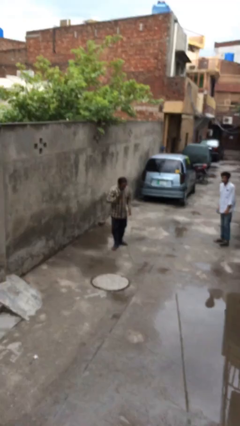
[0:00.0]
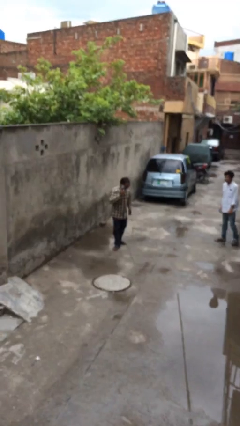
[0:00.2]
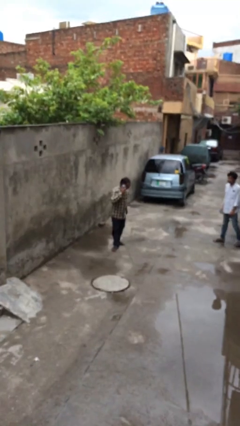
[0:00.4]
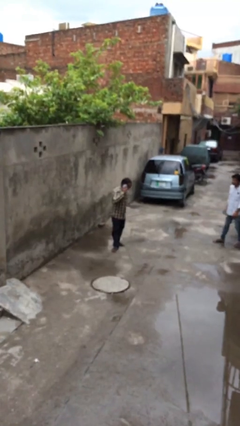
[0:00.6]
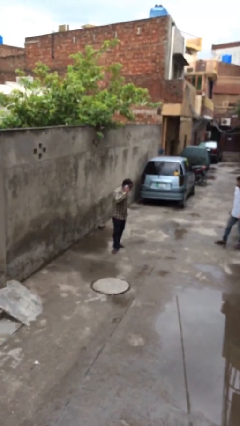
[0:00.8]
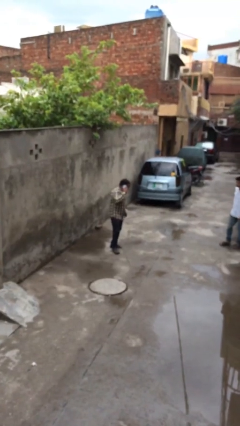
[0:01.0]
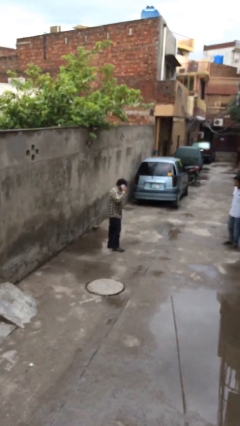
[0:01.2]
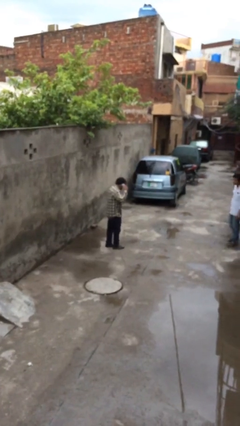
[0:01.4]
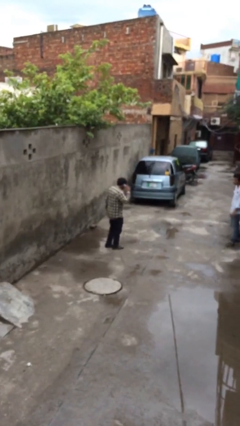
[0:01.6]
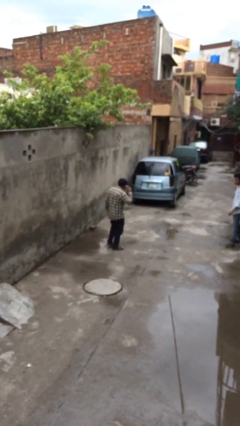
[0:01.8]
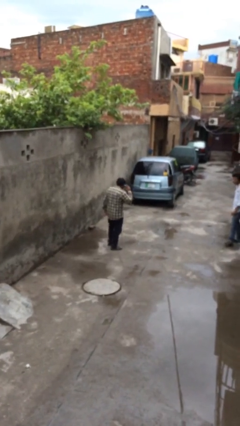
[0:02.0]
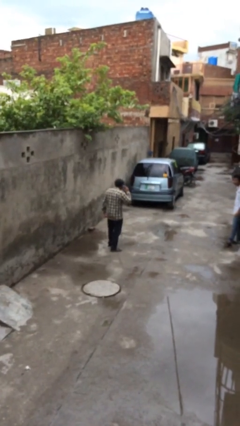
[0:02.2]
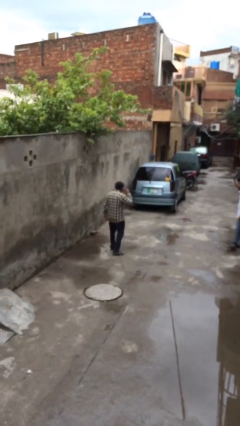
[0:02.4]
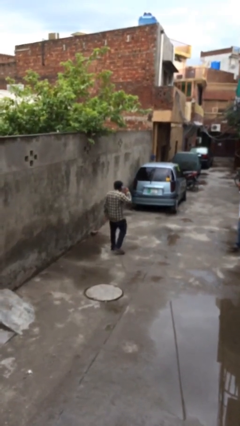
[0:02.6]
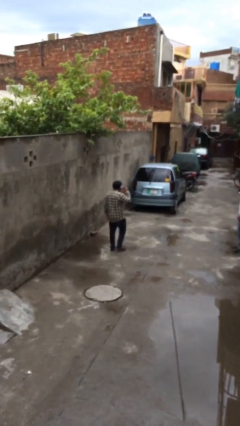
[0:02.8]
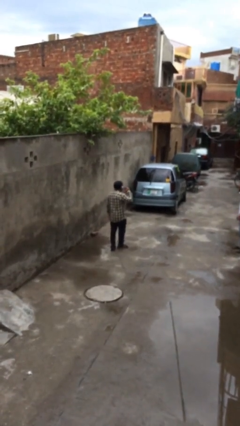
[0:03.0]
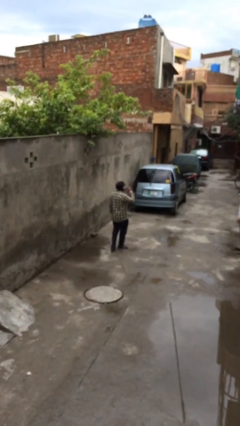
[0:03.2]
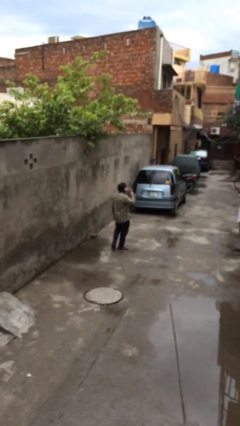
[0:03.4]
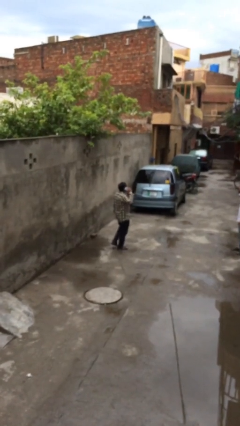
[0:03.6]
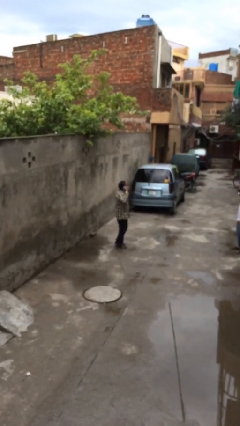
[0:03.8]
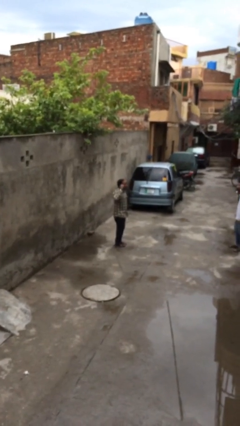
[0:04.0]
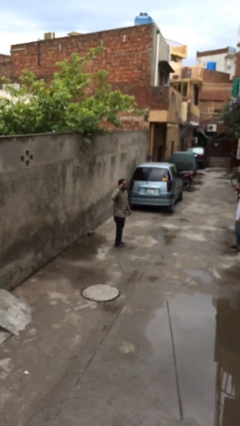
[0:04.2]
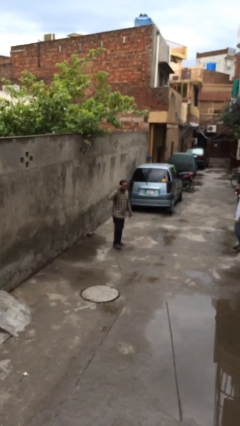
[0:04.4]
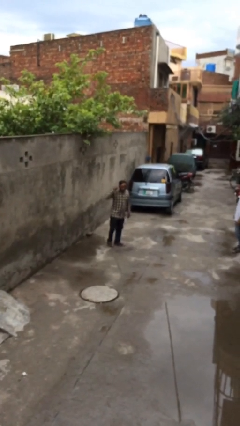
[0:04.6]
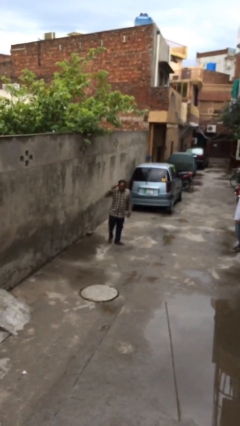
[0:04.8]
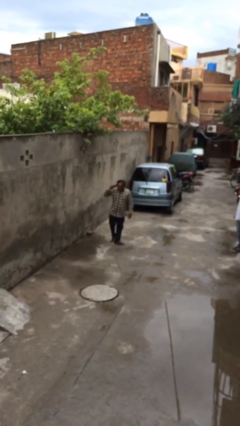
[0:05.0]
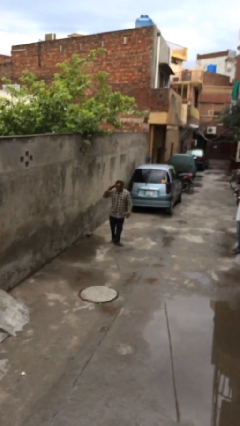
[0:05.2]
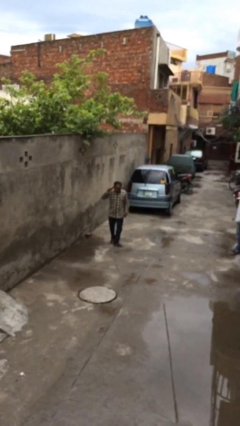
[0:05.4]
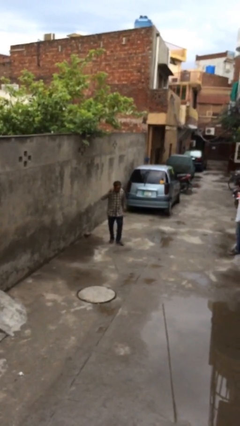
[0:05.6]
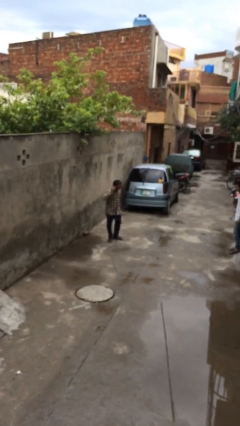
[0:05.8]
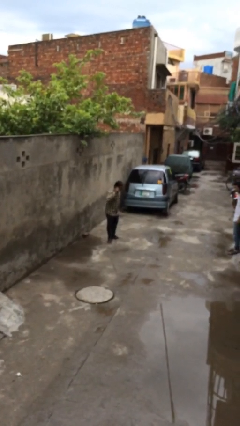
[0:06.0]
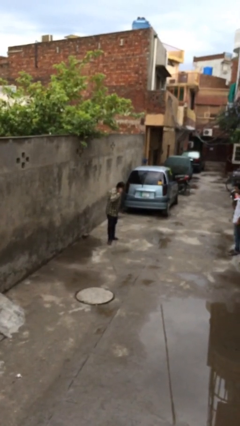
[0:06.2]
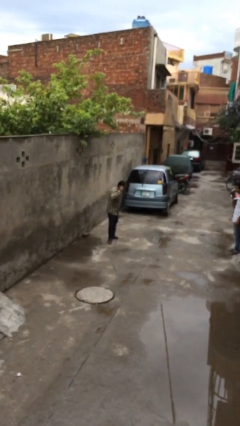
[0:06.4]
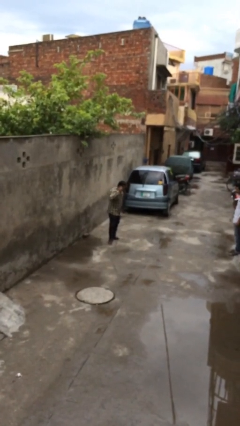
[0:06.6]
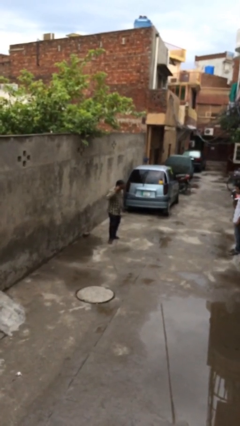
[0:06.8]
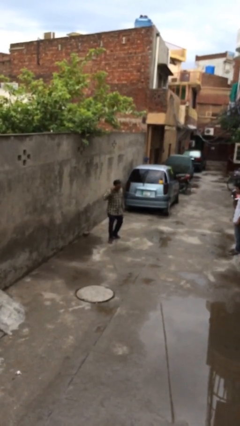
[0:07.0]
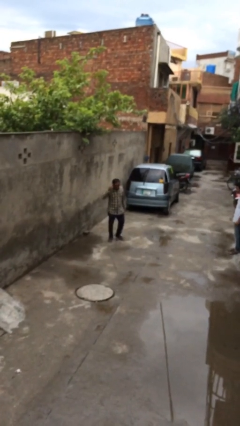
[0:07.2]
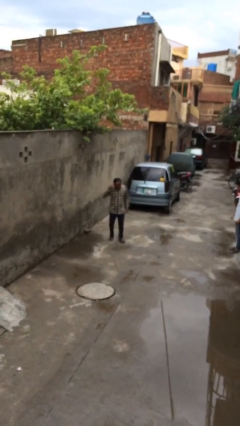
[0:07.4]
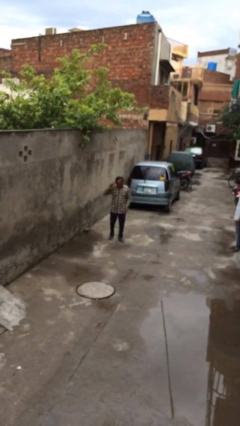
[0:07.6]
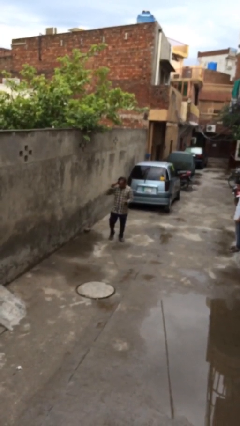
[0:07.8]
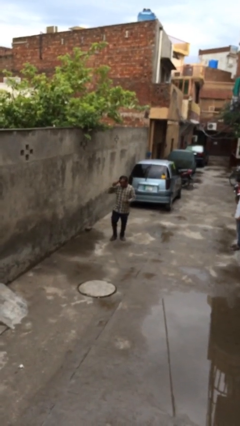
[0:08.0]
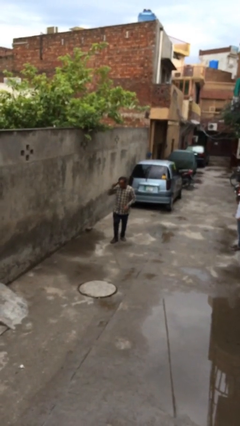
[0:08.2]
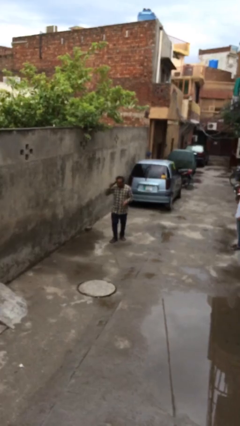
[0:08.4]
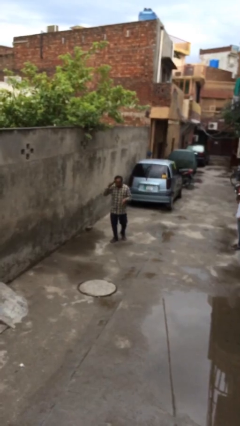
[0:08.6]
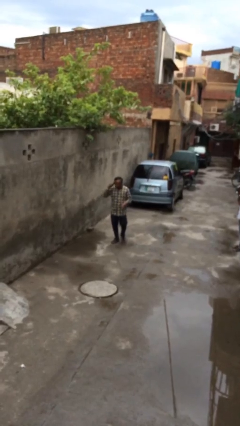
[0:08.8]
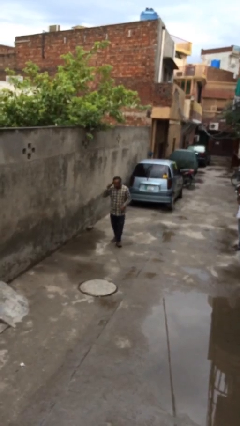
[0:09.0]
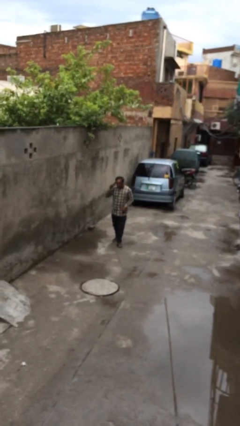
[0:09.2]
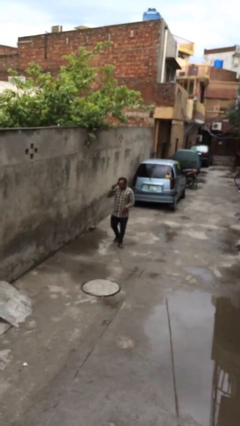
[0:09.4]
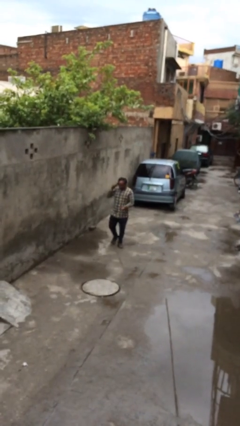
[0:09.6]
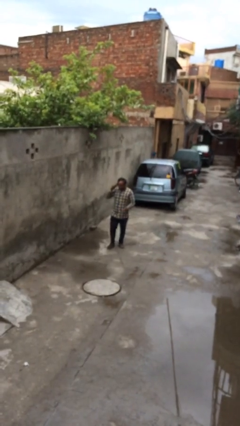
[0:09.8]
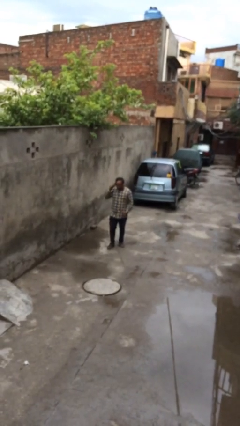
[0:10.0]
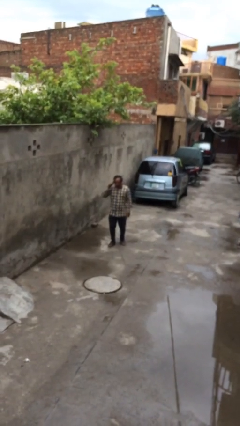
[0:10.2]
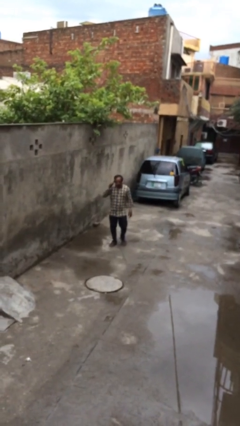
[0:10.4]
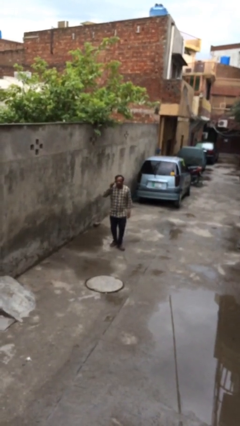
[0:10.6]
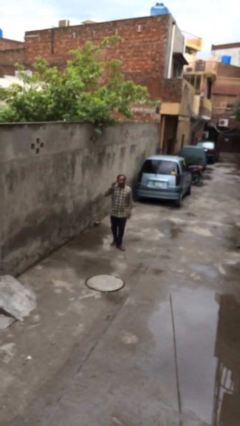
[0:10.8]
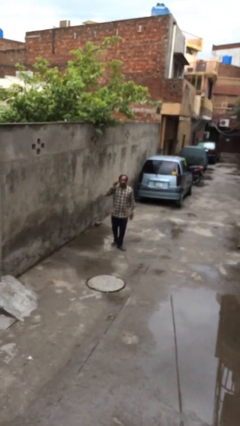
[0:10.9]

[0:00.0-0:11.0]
person talks on phone

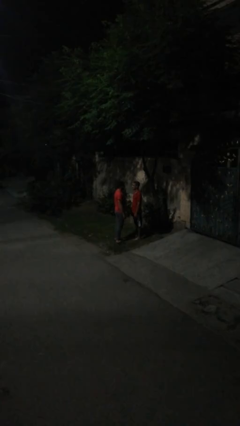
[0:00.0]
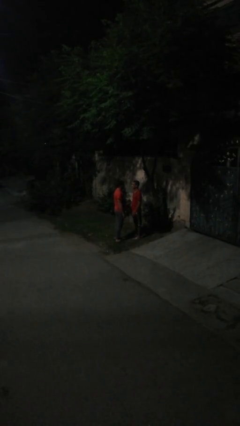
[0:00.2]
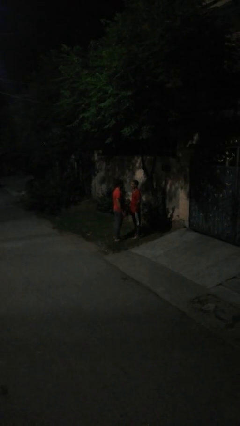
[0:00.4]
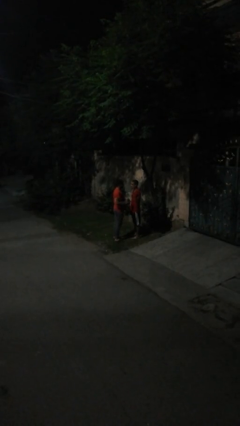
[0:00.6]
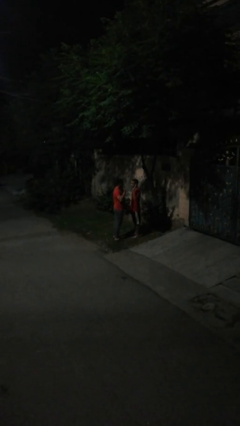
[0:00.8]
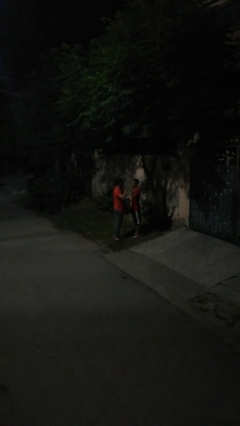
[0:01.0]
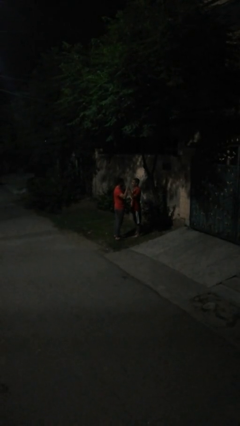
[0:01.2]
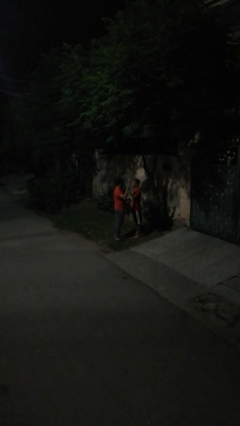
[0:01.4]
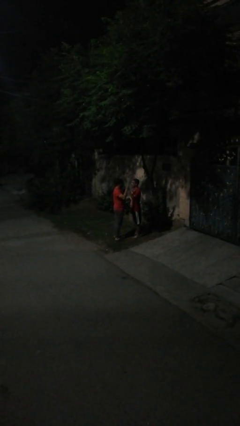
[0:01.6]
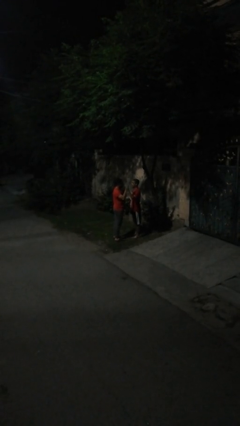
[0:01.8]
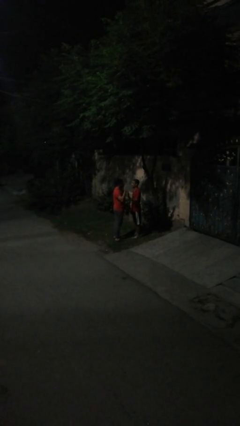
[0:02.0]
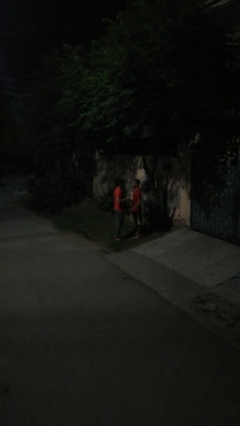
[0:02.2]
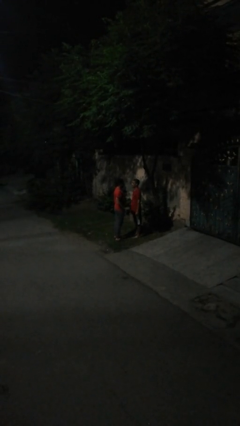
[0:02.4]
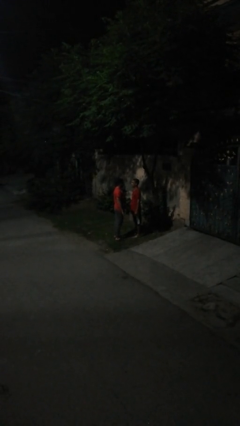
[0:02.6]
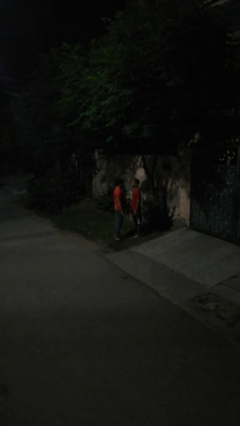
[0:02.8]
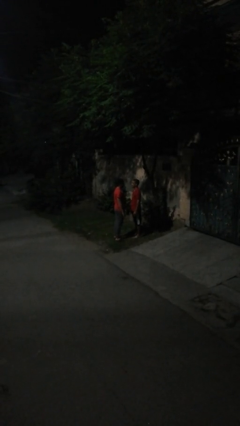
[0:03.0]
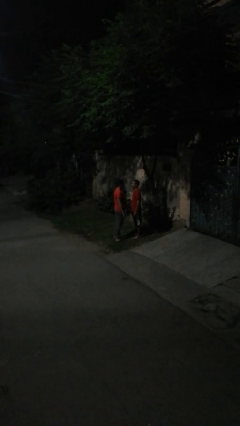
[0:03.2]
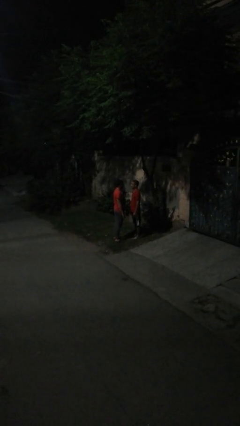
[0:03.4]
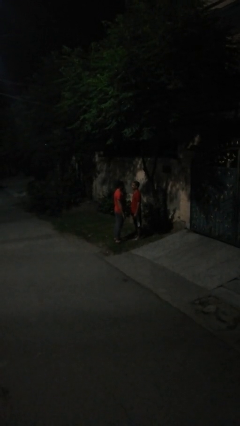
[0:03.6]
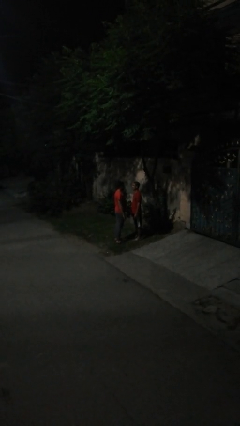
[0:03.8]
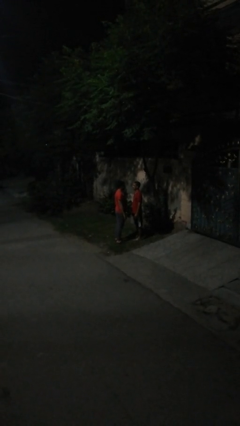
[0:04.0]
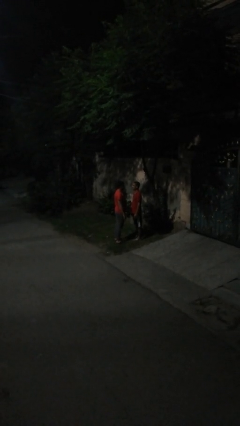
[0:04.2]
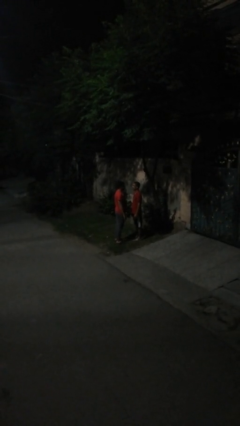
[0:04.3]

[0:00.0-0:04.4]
person highfives hand

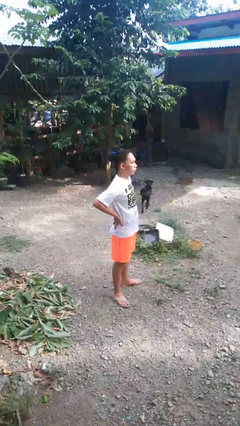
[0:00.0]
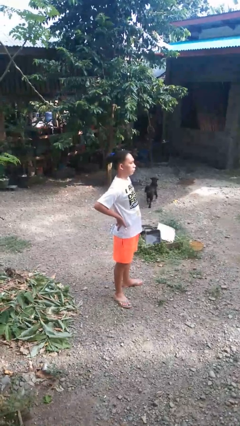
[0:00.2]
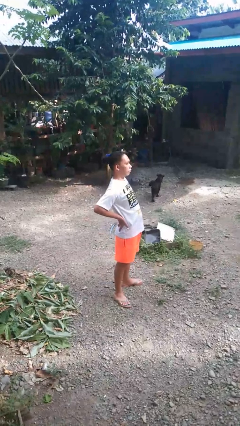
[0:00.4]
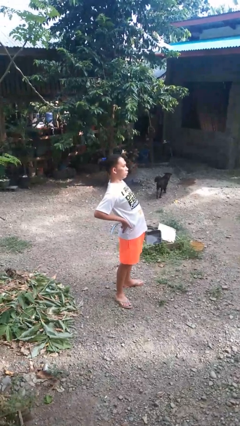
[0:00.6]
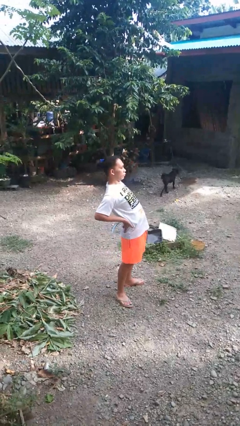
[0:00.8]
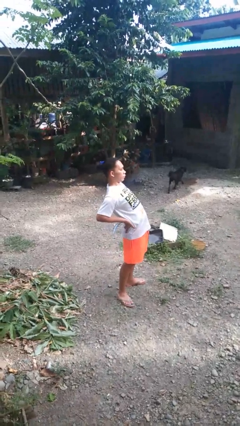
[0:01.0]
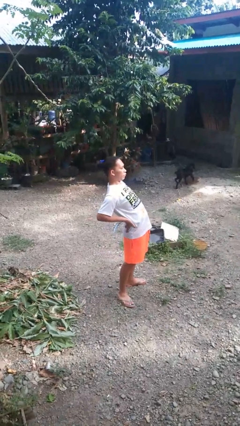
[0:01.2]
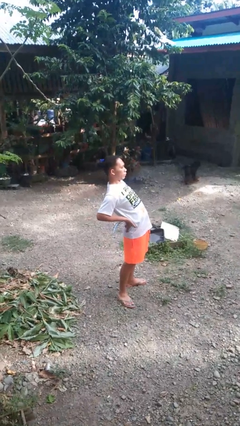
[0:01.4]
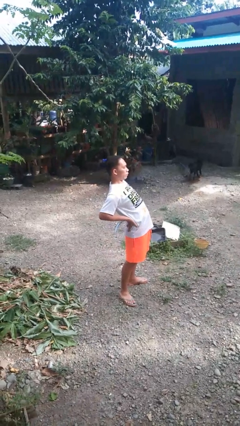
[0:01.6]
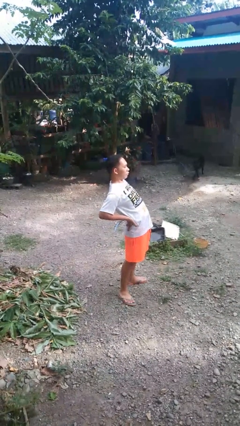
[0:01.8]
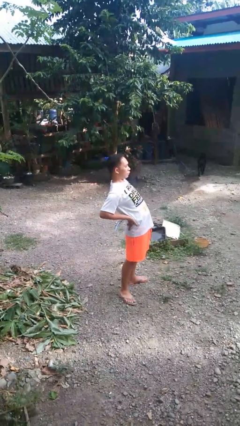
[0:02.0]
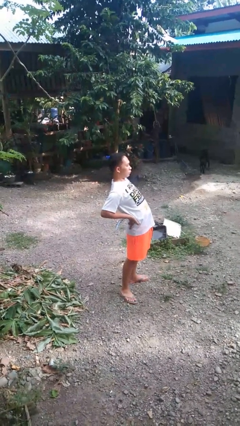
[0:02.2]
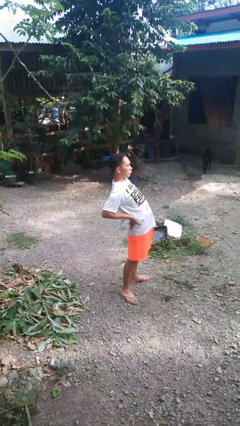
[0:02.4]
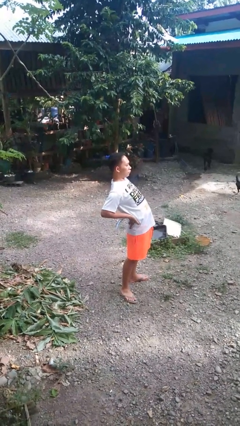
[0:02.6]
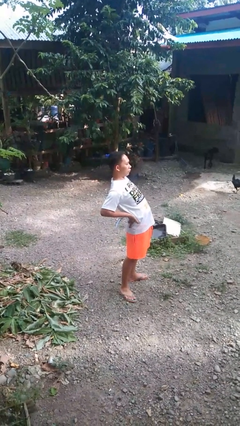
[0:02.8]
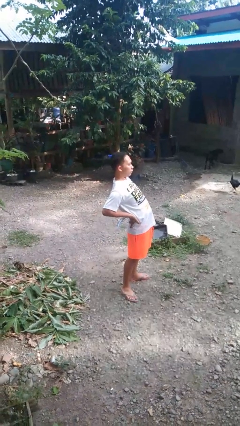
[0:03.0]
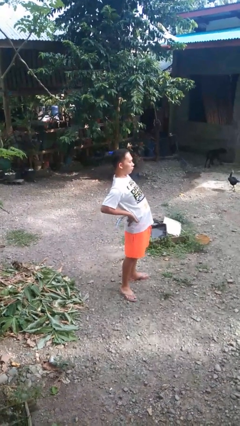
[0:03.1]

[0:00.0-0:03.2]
person stretches back
